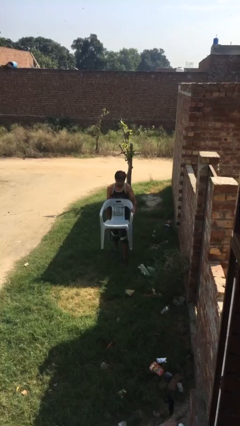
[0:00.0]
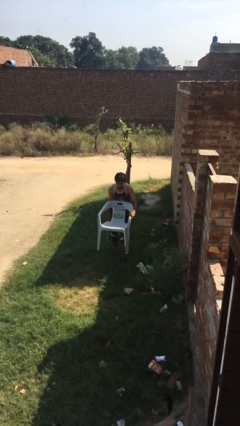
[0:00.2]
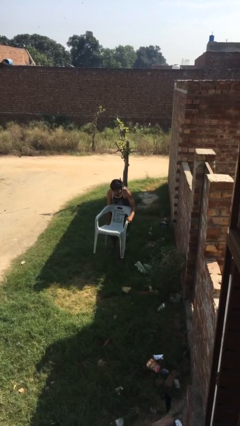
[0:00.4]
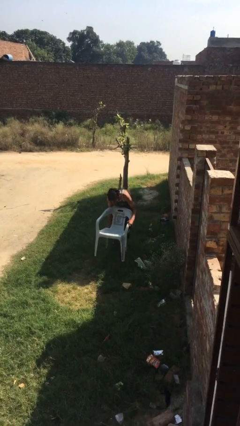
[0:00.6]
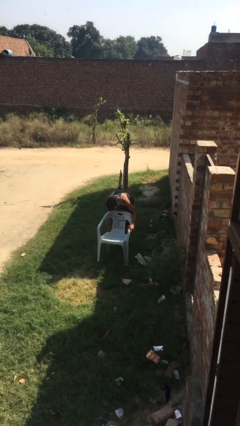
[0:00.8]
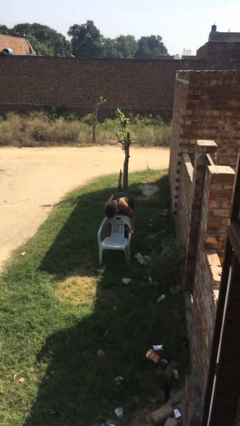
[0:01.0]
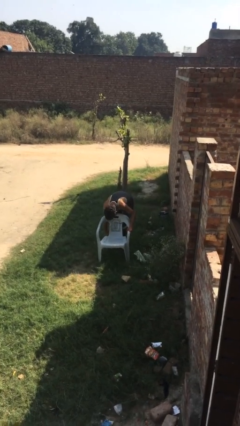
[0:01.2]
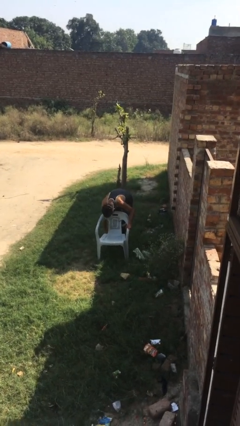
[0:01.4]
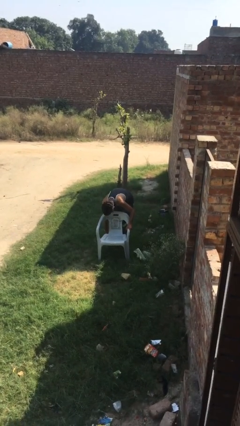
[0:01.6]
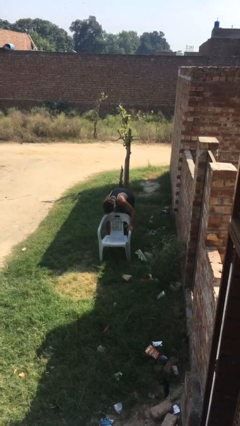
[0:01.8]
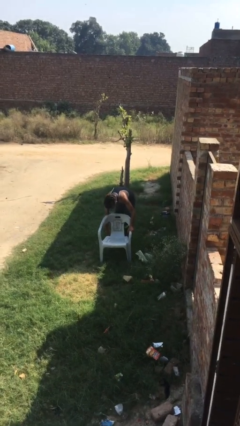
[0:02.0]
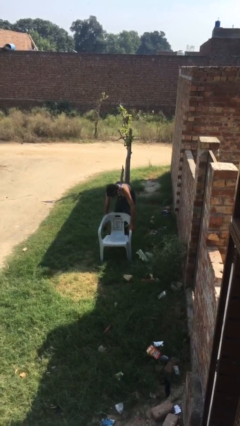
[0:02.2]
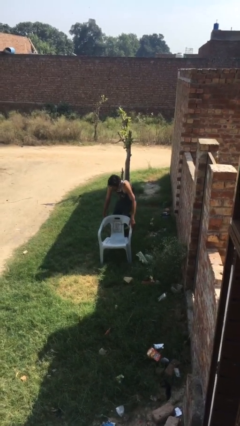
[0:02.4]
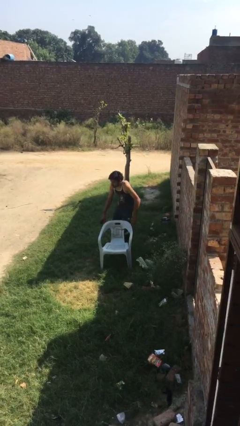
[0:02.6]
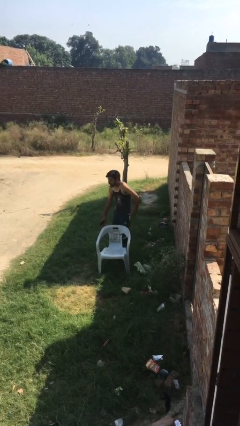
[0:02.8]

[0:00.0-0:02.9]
person puts down object on floor

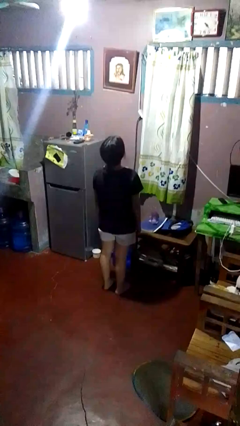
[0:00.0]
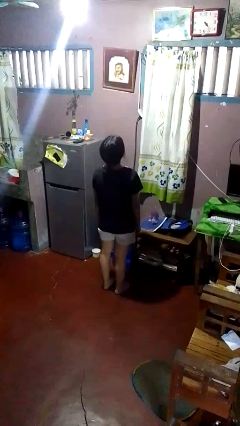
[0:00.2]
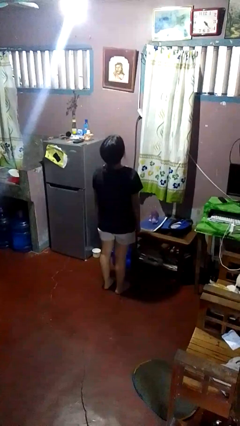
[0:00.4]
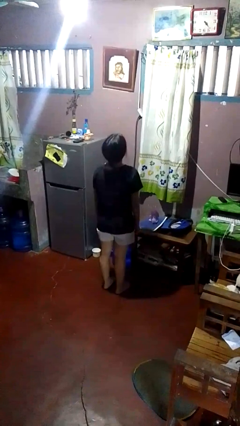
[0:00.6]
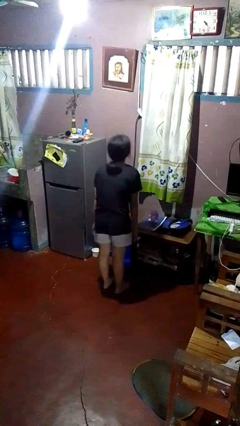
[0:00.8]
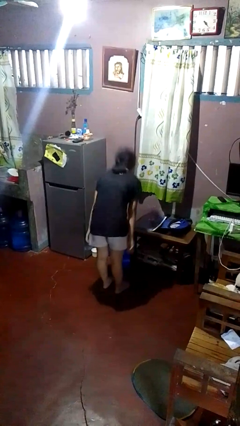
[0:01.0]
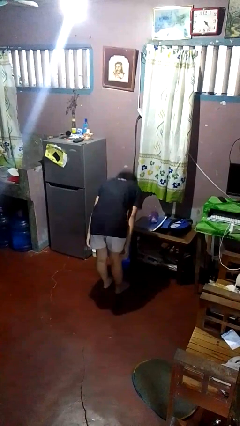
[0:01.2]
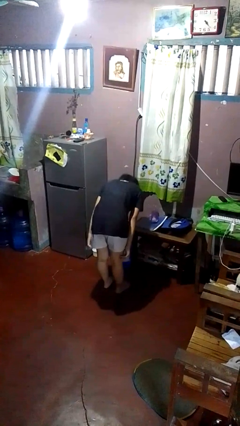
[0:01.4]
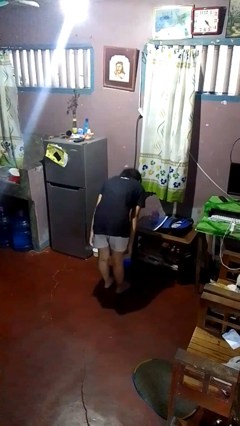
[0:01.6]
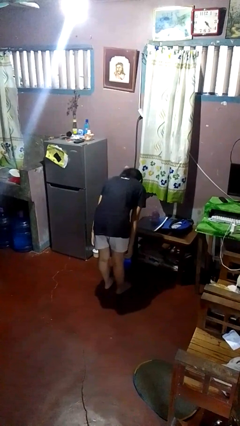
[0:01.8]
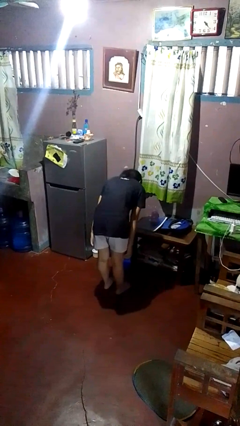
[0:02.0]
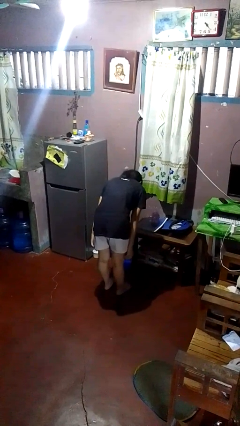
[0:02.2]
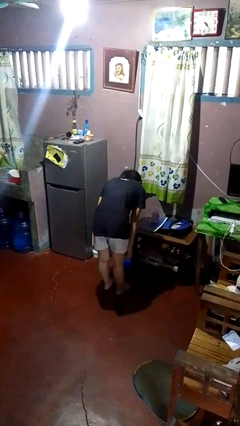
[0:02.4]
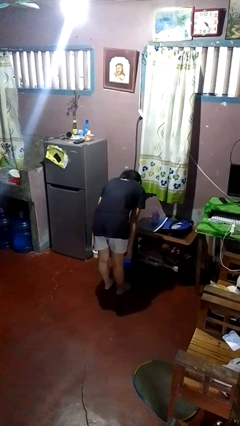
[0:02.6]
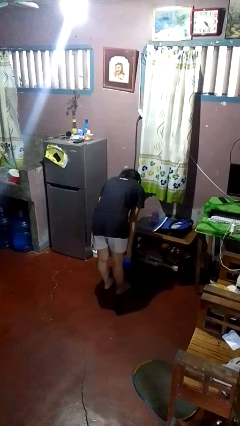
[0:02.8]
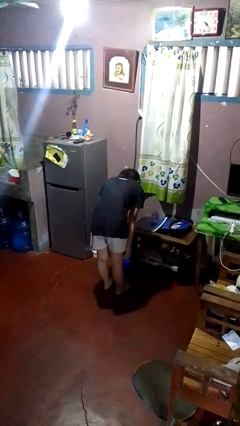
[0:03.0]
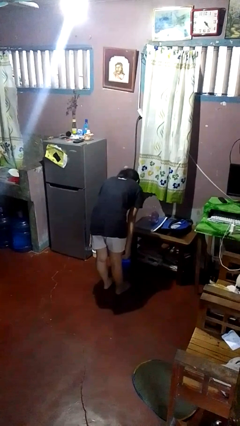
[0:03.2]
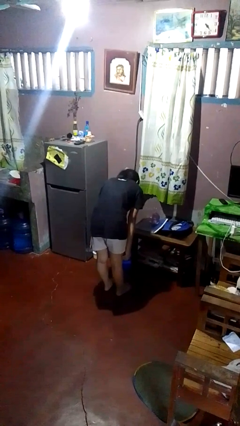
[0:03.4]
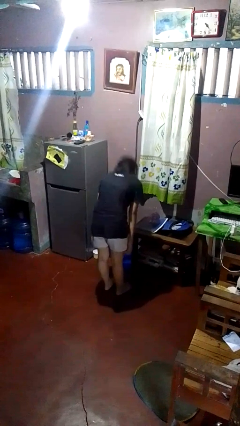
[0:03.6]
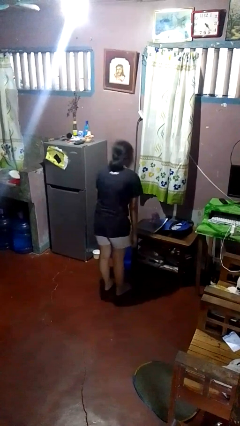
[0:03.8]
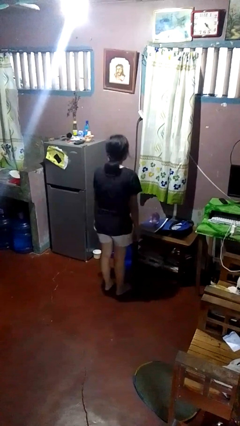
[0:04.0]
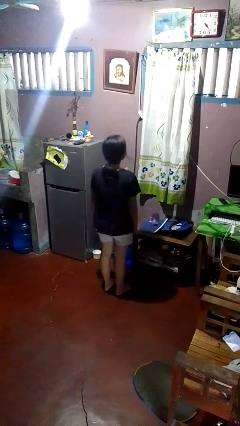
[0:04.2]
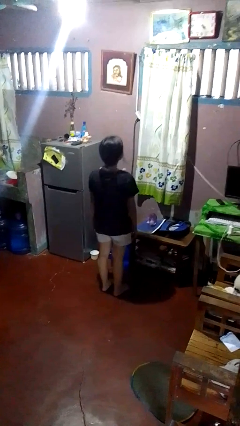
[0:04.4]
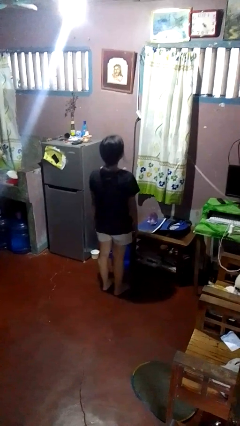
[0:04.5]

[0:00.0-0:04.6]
person bows

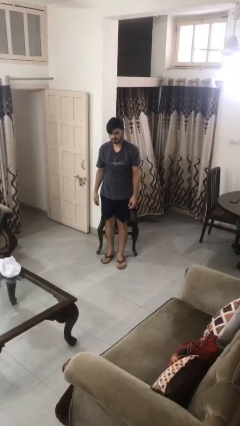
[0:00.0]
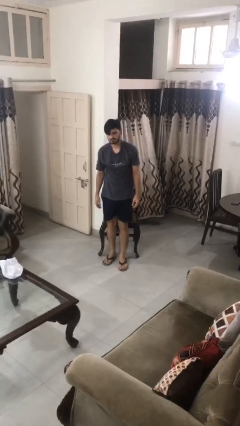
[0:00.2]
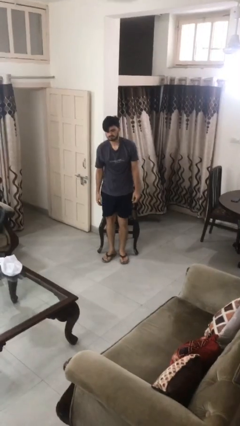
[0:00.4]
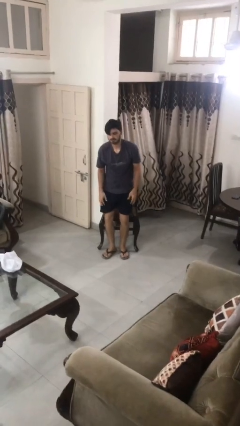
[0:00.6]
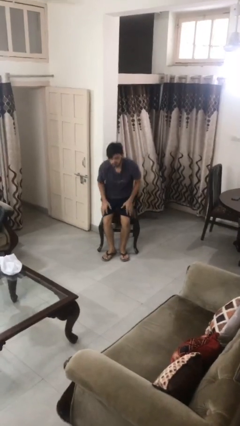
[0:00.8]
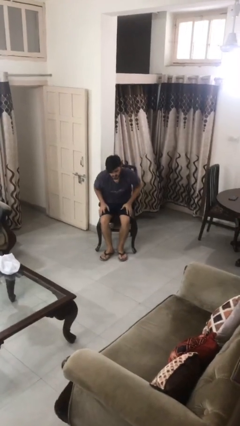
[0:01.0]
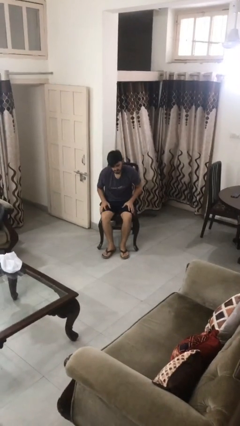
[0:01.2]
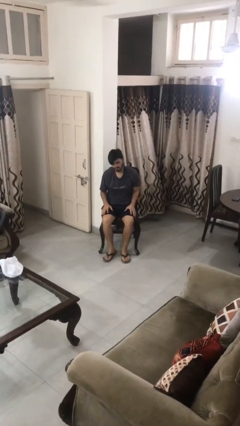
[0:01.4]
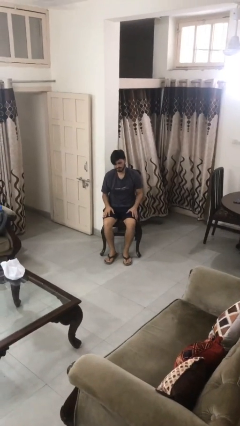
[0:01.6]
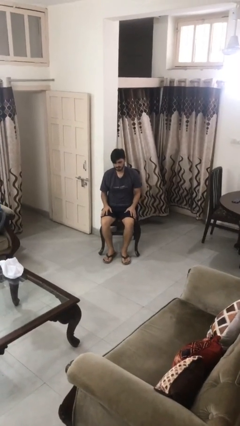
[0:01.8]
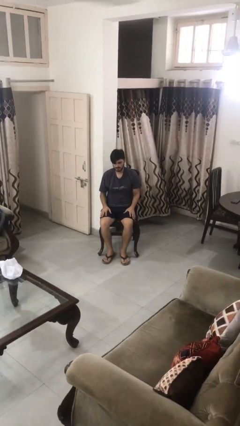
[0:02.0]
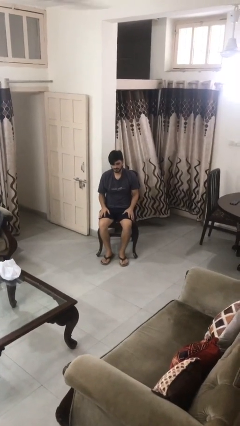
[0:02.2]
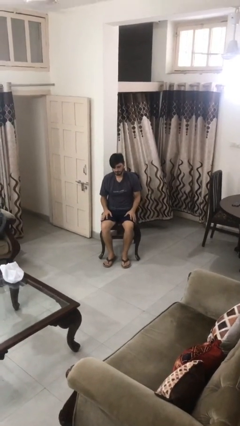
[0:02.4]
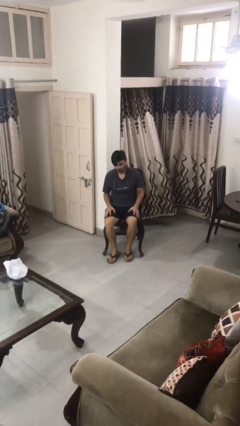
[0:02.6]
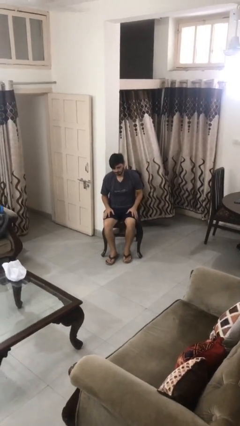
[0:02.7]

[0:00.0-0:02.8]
person sits down

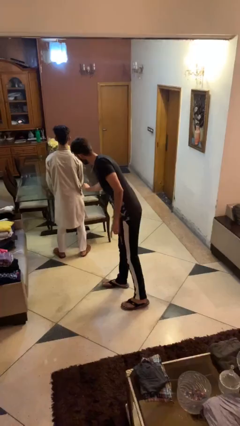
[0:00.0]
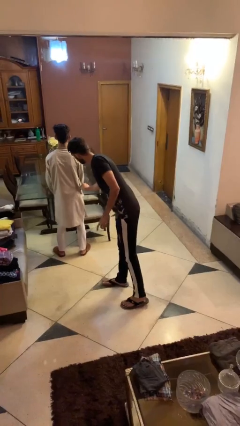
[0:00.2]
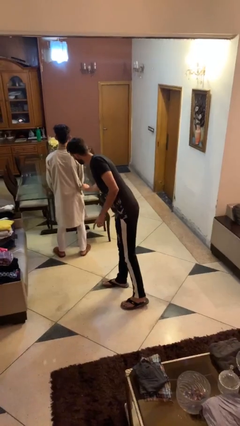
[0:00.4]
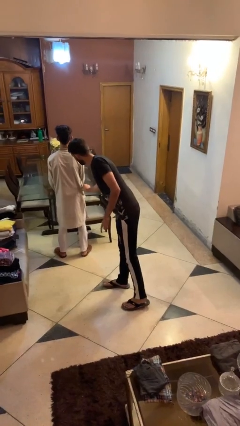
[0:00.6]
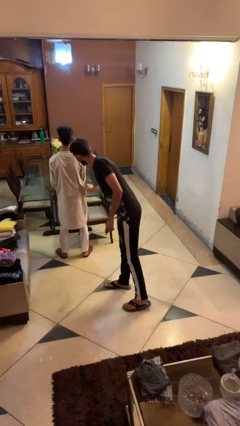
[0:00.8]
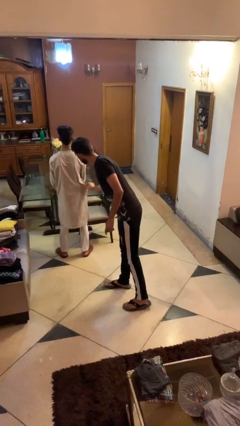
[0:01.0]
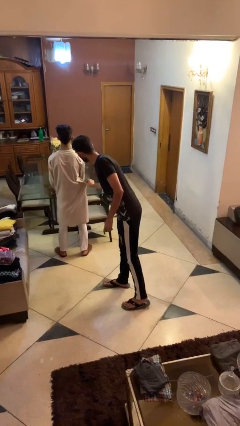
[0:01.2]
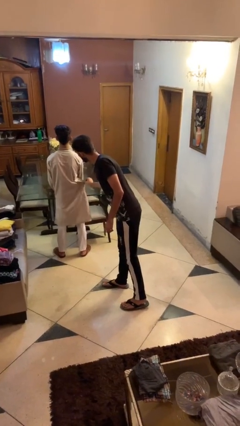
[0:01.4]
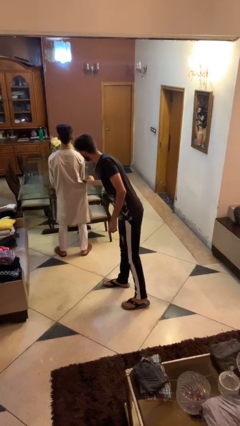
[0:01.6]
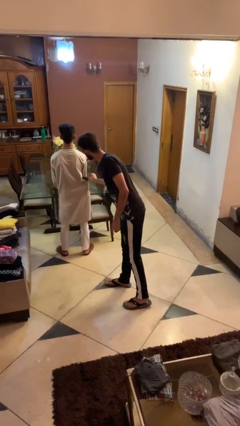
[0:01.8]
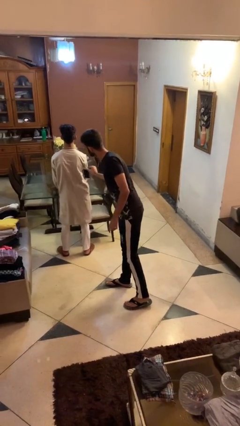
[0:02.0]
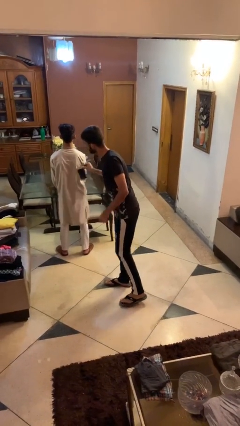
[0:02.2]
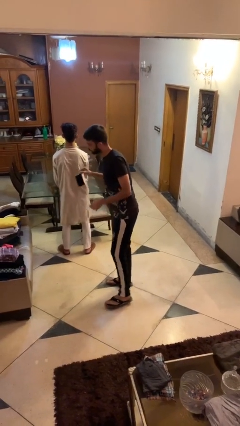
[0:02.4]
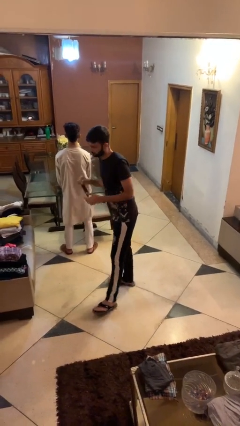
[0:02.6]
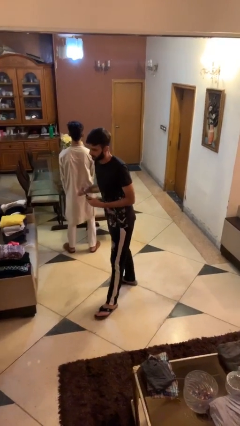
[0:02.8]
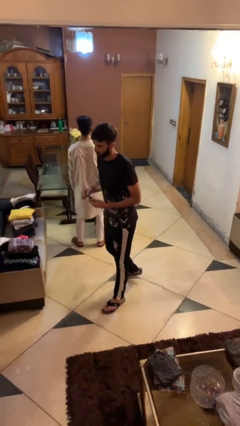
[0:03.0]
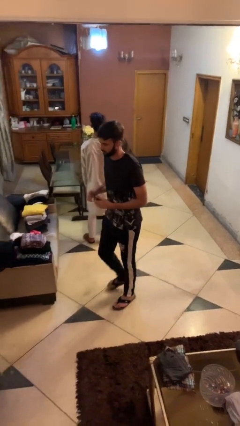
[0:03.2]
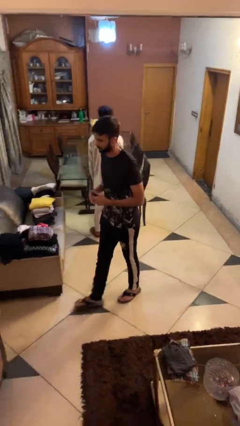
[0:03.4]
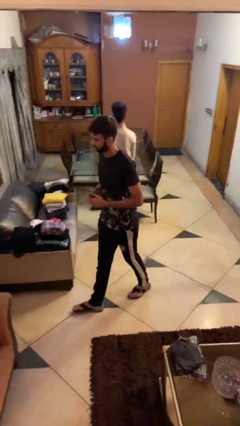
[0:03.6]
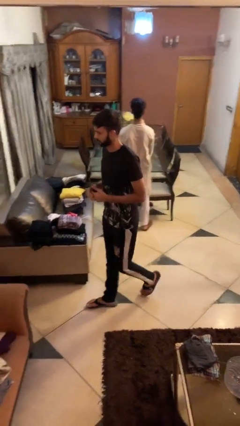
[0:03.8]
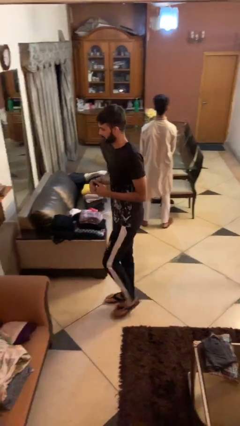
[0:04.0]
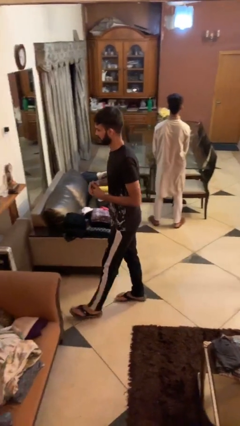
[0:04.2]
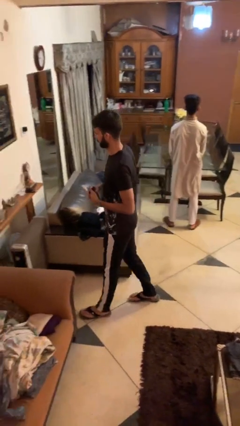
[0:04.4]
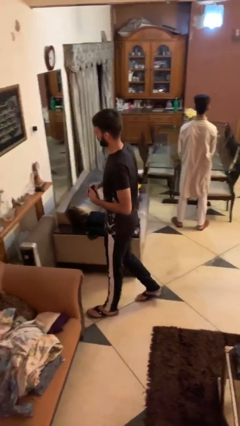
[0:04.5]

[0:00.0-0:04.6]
person steals object from person

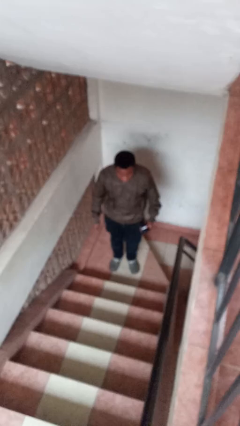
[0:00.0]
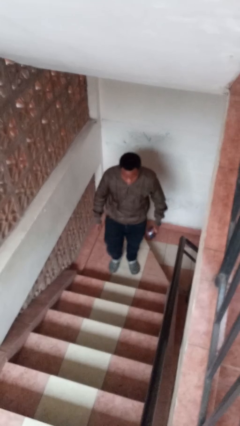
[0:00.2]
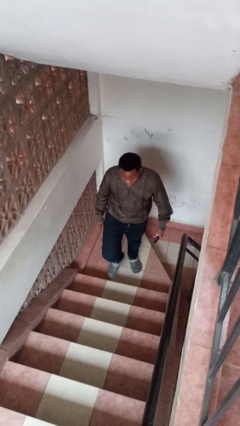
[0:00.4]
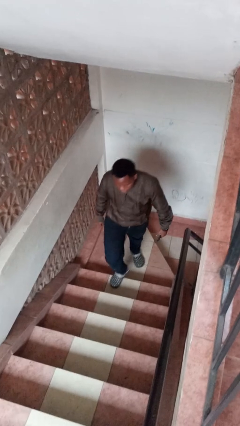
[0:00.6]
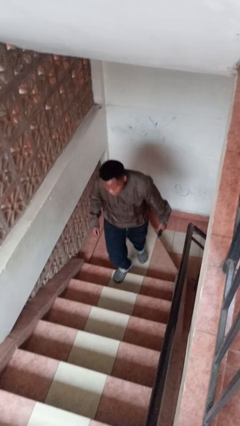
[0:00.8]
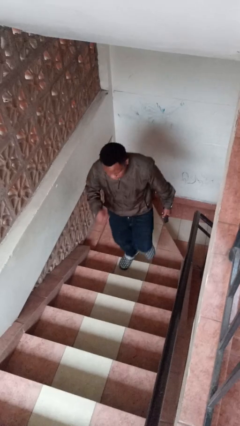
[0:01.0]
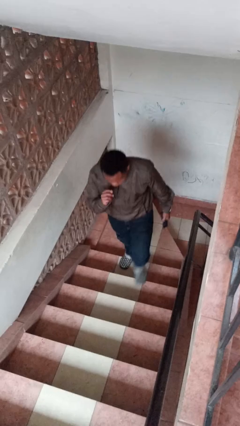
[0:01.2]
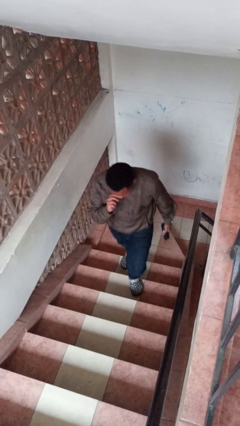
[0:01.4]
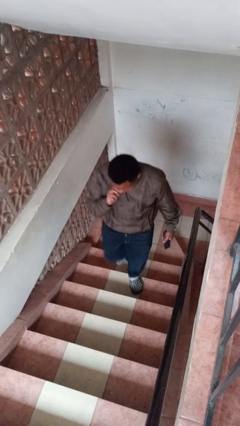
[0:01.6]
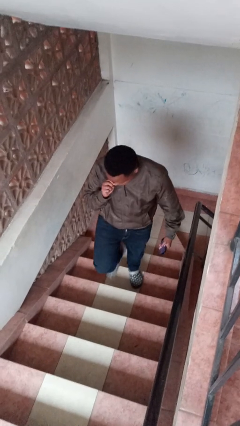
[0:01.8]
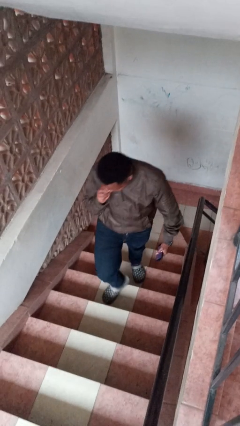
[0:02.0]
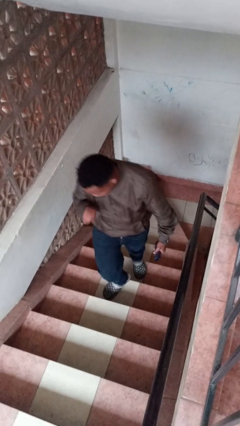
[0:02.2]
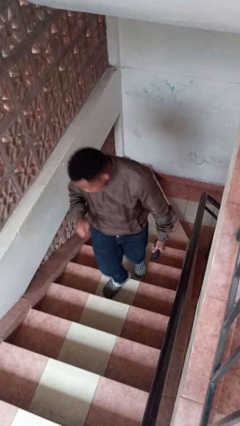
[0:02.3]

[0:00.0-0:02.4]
person climbs up stairs

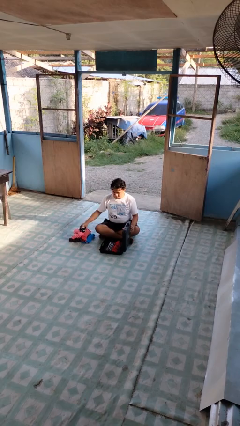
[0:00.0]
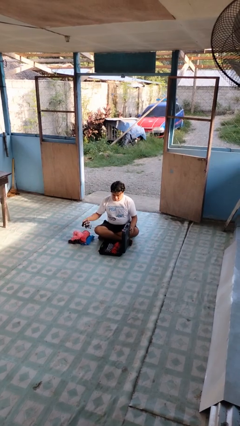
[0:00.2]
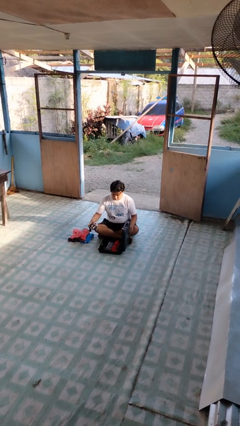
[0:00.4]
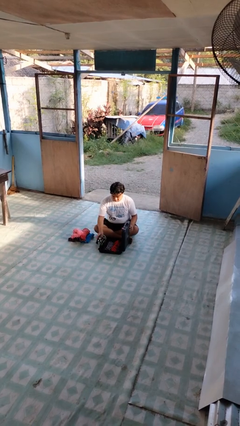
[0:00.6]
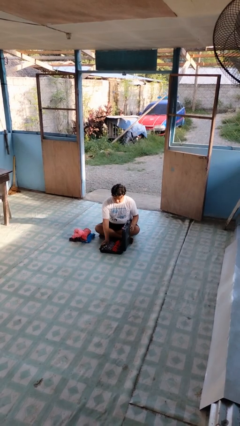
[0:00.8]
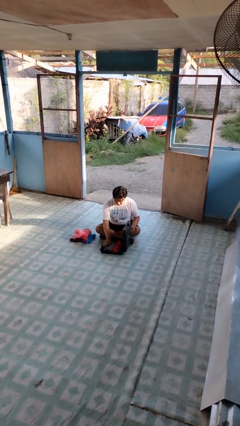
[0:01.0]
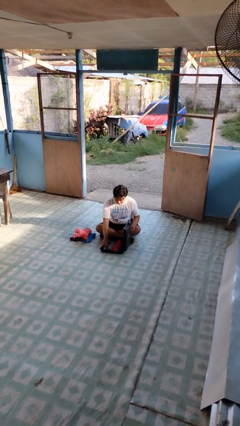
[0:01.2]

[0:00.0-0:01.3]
person loads clothes into suitcase
